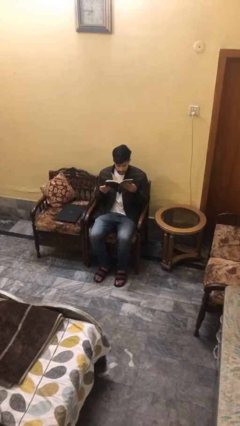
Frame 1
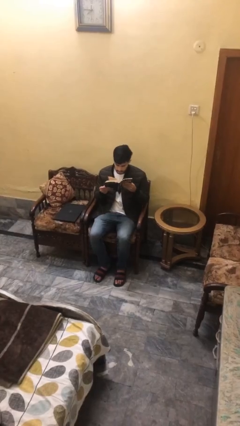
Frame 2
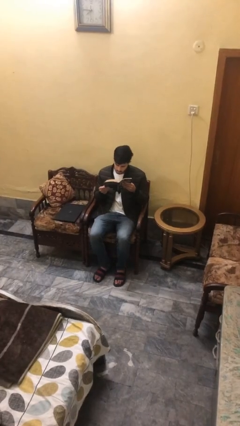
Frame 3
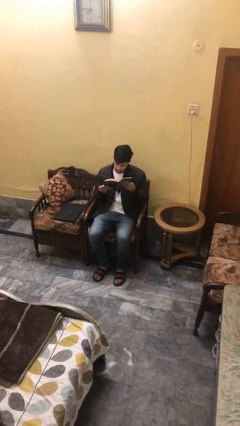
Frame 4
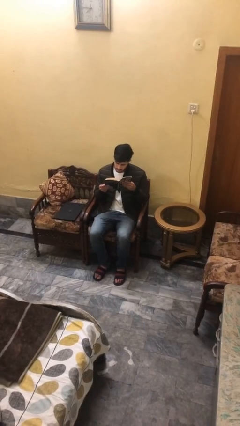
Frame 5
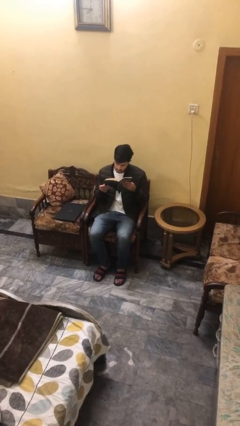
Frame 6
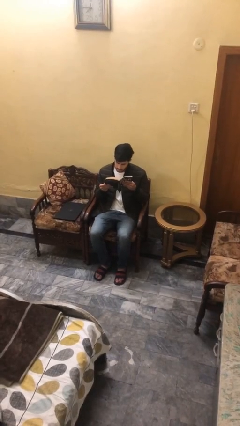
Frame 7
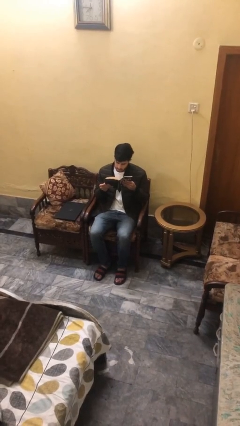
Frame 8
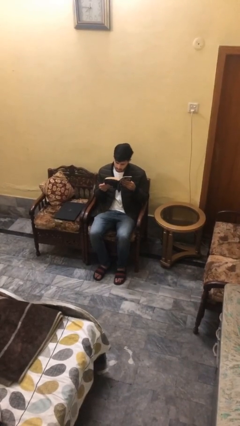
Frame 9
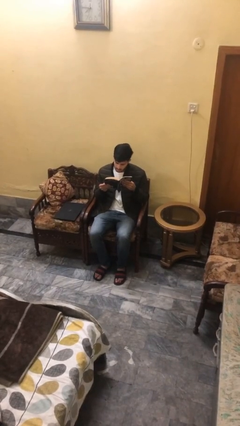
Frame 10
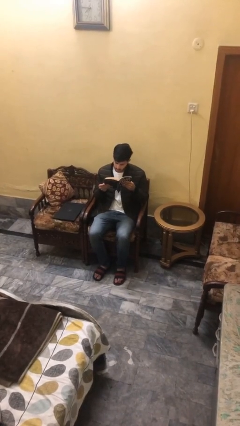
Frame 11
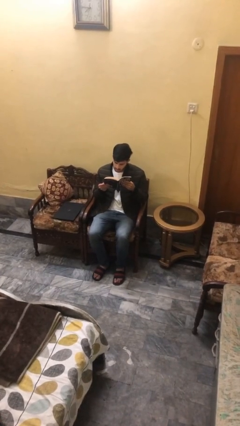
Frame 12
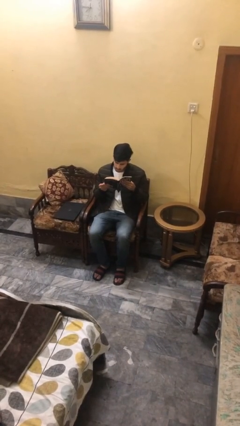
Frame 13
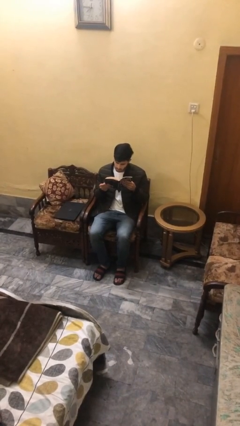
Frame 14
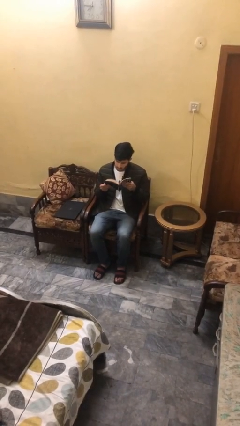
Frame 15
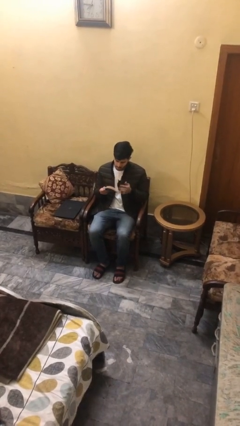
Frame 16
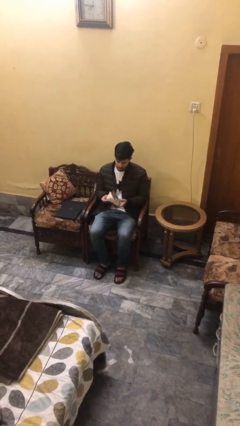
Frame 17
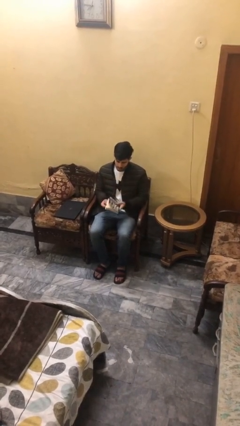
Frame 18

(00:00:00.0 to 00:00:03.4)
person reads document

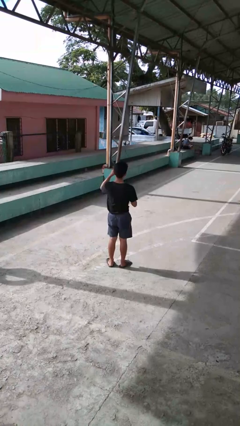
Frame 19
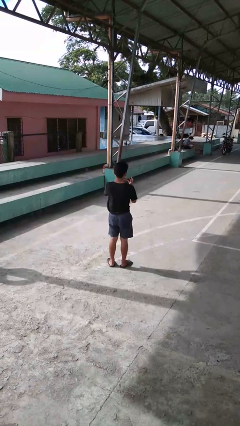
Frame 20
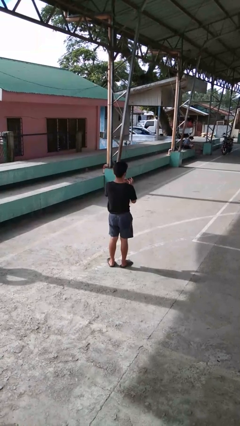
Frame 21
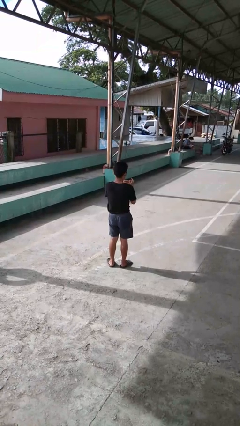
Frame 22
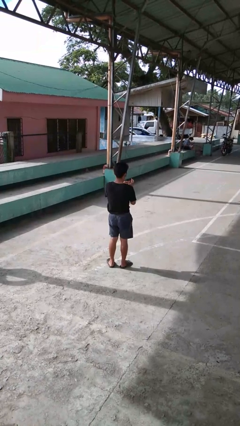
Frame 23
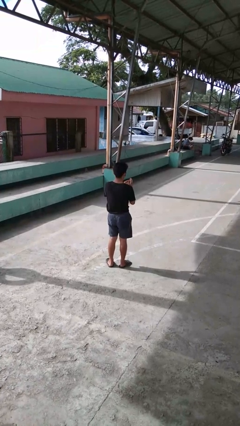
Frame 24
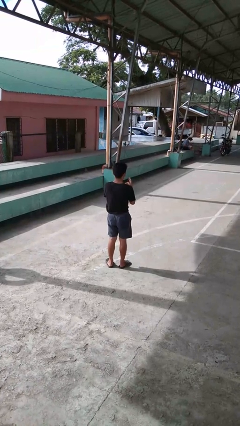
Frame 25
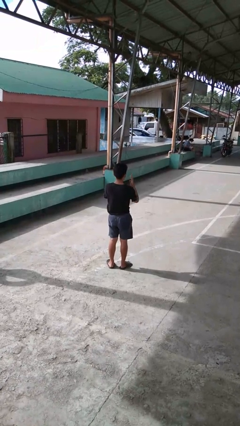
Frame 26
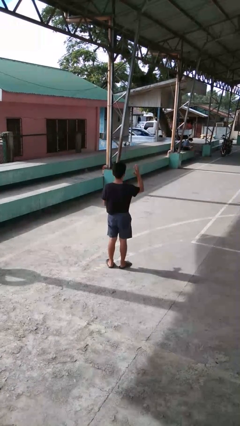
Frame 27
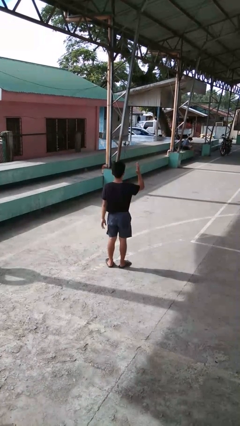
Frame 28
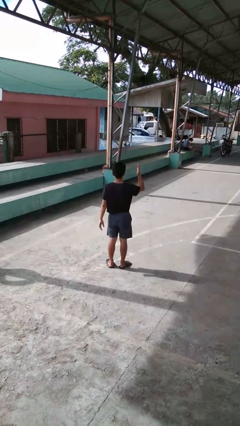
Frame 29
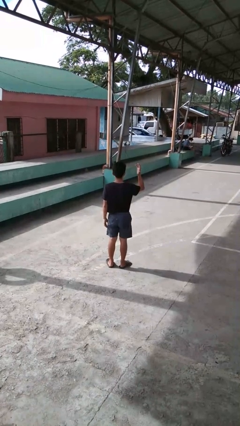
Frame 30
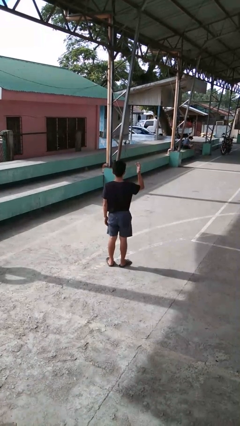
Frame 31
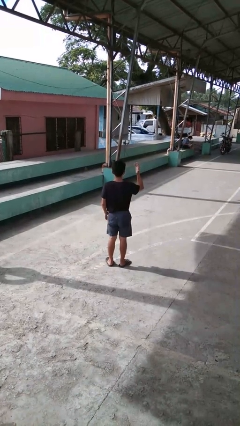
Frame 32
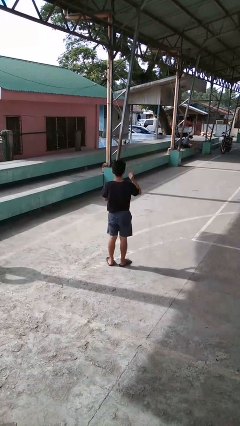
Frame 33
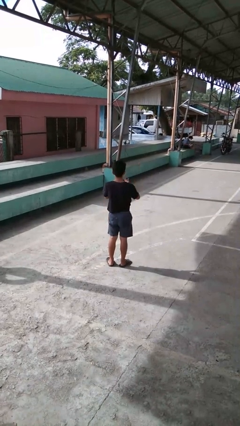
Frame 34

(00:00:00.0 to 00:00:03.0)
person puts on ring

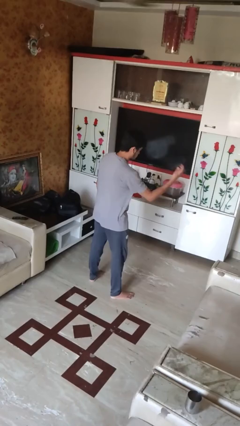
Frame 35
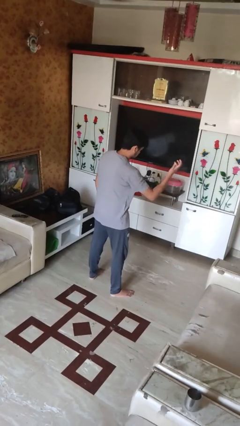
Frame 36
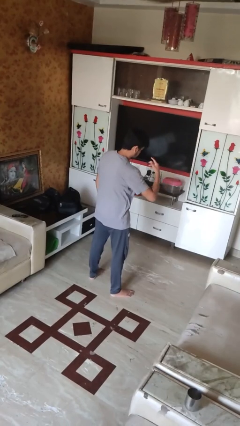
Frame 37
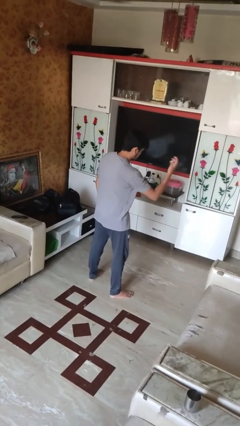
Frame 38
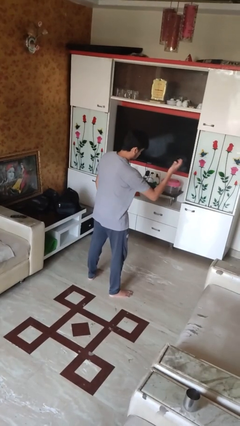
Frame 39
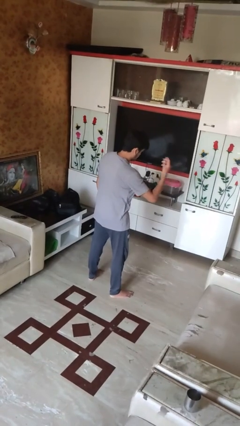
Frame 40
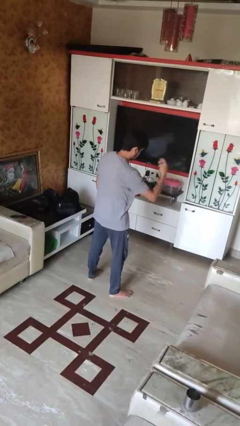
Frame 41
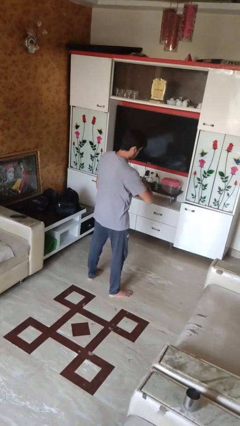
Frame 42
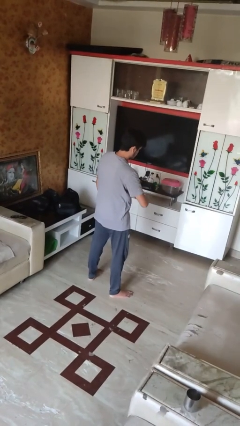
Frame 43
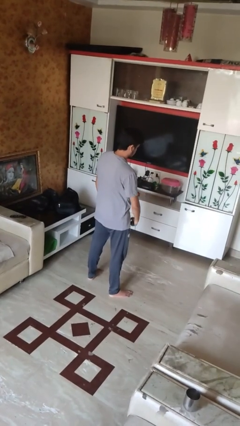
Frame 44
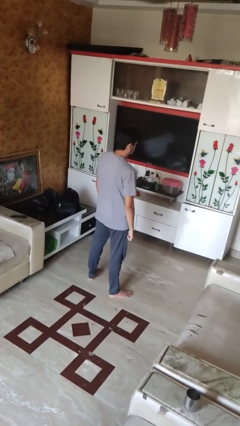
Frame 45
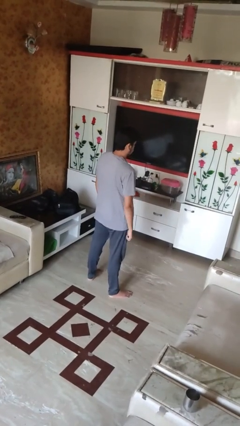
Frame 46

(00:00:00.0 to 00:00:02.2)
person gestures come here

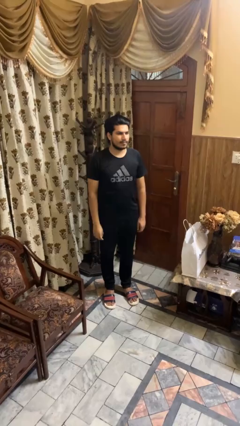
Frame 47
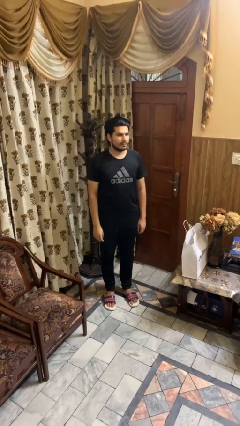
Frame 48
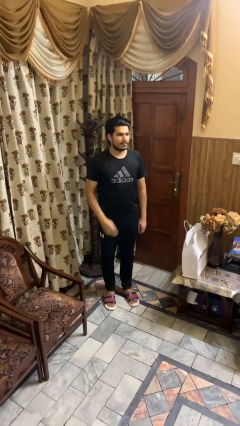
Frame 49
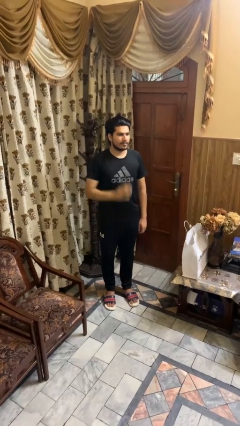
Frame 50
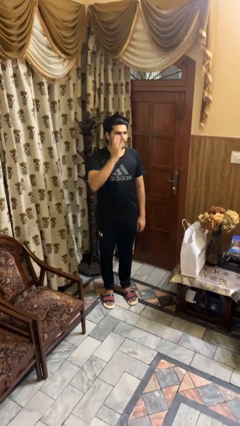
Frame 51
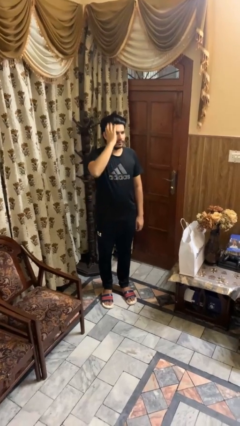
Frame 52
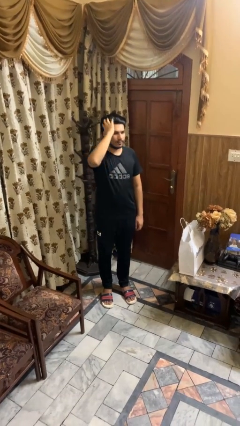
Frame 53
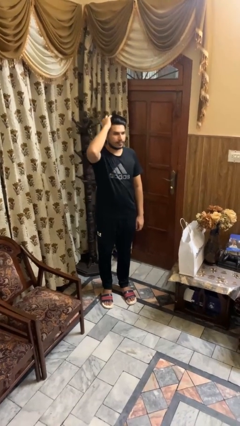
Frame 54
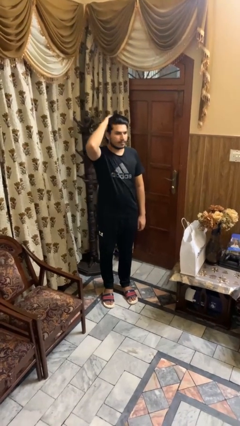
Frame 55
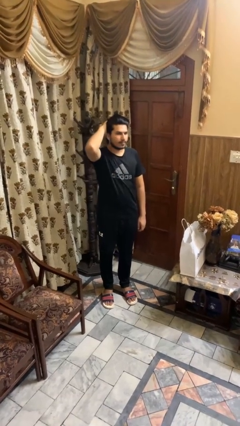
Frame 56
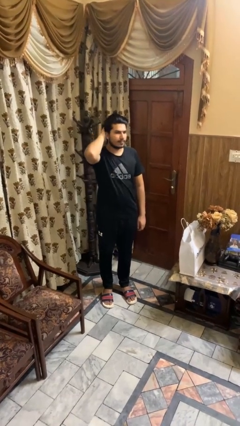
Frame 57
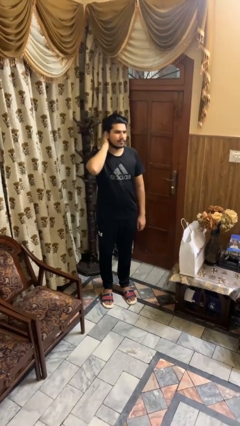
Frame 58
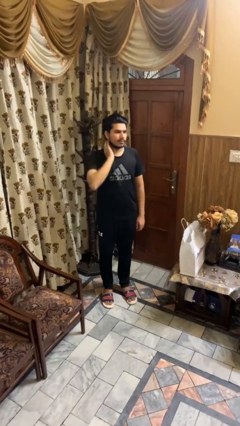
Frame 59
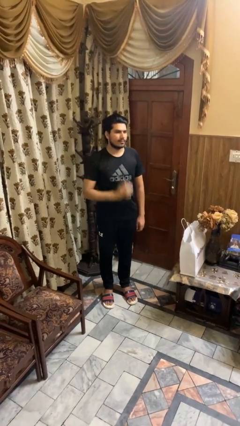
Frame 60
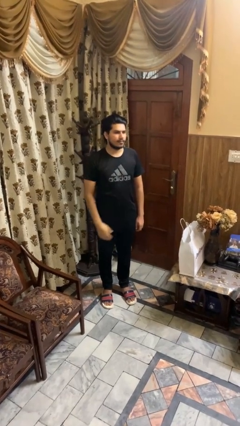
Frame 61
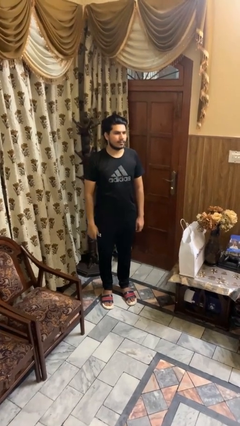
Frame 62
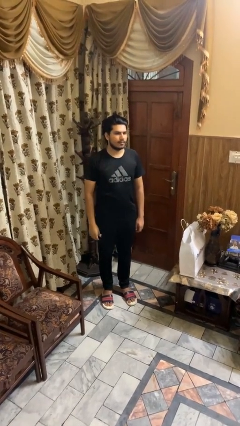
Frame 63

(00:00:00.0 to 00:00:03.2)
person strokes hair

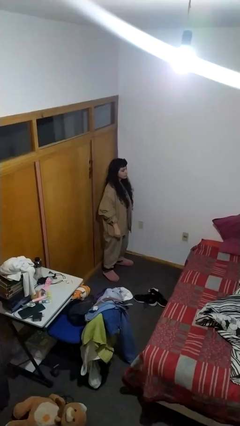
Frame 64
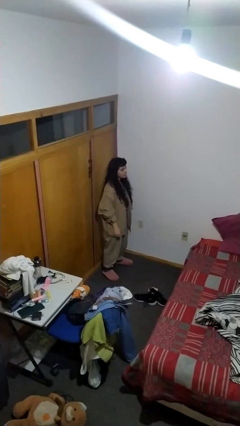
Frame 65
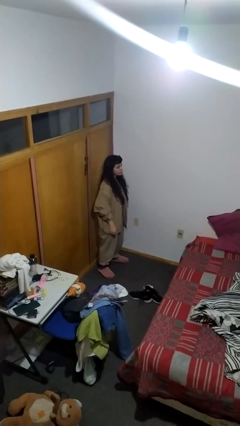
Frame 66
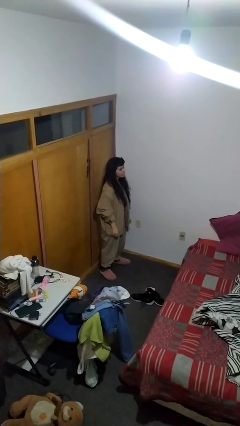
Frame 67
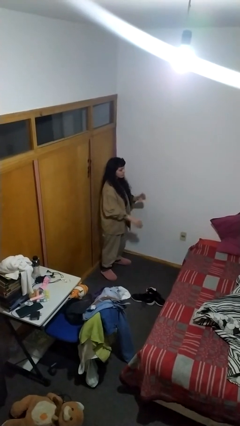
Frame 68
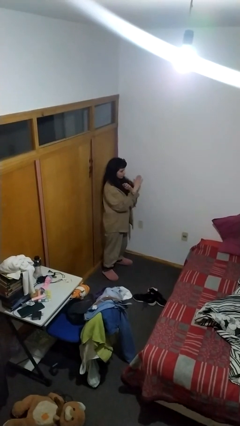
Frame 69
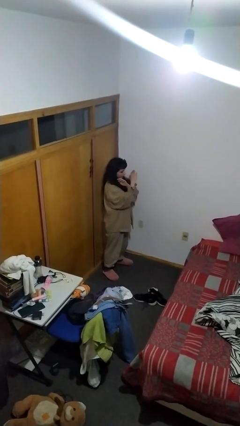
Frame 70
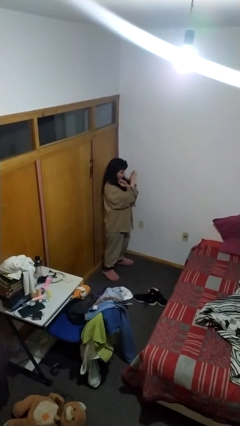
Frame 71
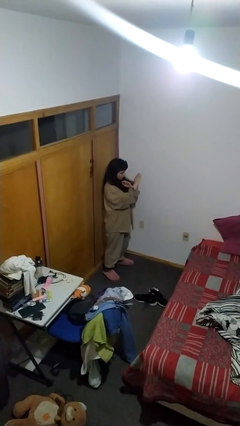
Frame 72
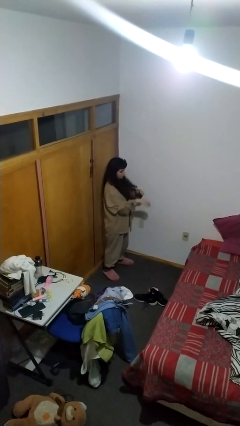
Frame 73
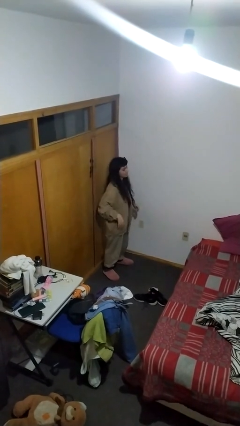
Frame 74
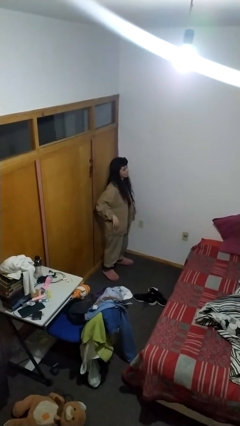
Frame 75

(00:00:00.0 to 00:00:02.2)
person gestures arms x

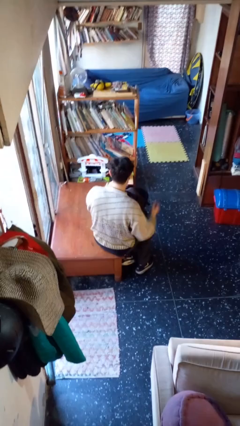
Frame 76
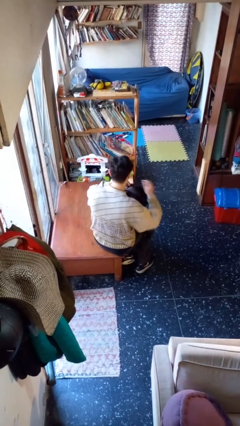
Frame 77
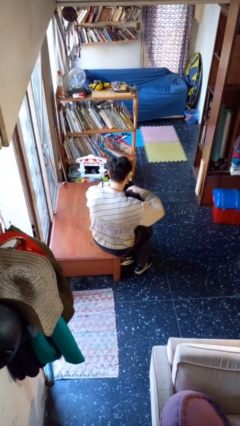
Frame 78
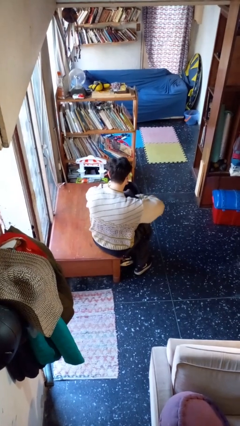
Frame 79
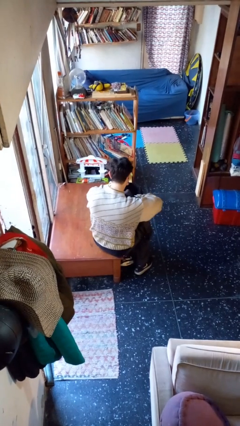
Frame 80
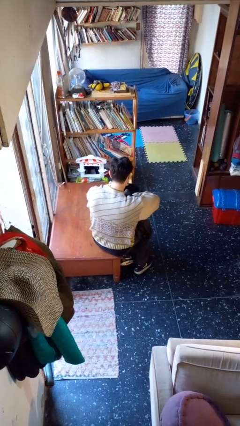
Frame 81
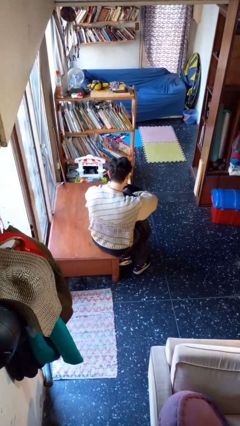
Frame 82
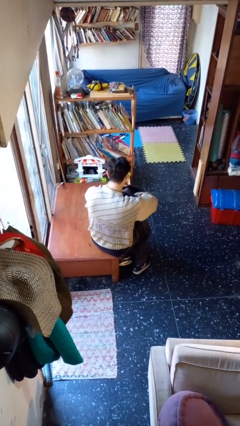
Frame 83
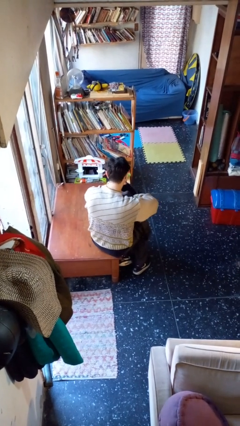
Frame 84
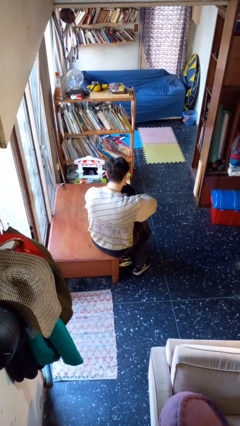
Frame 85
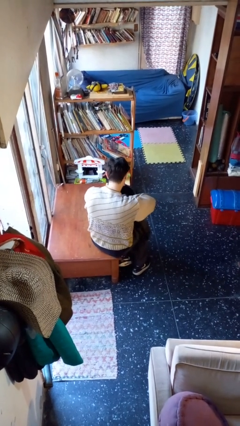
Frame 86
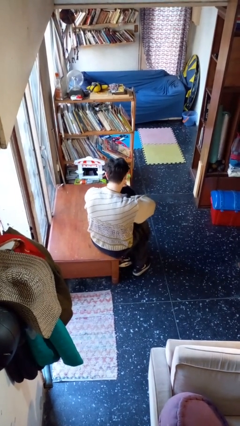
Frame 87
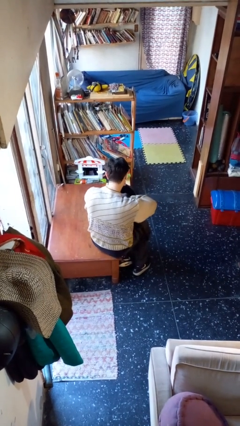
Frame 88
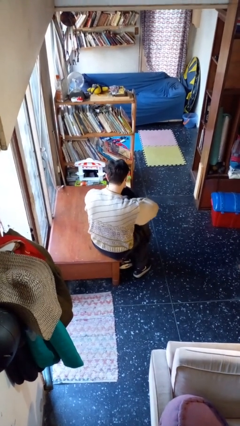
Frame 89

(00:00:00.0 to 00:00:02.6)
person searches in backpack

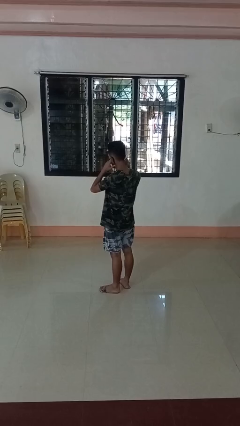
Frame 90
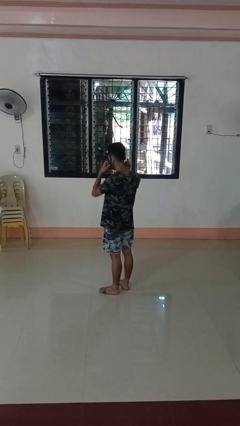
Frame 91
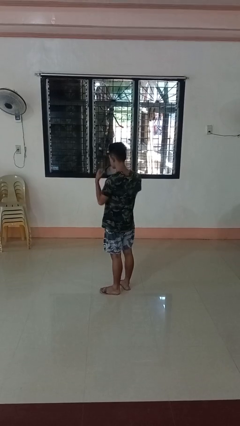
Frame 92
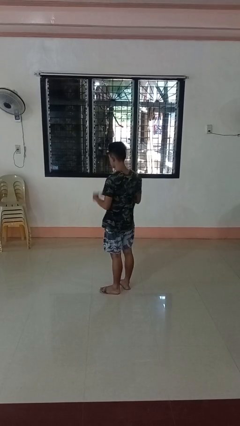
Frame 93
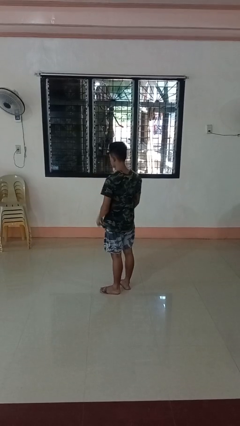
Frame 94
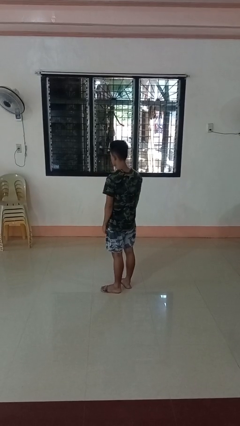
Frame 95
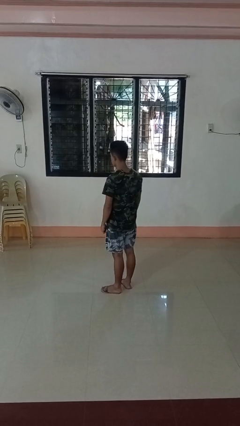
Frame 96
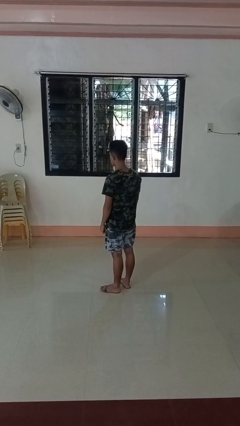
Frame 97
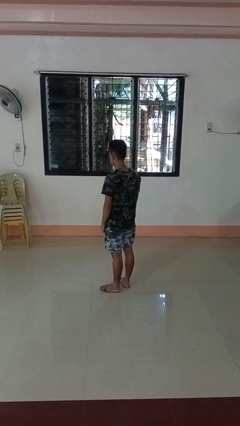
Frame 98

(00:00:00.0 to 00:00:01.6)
person takes off facemask
